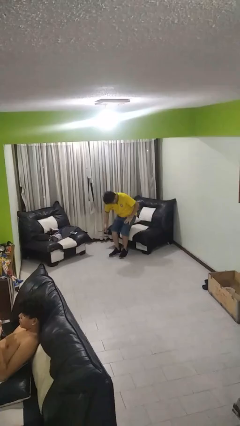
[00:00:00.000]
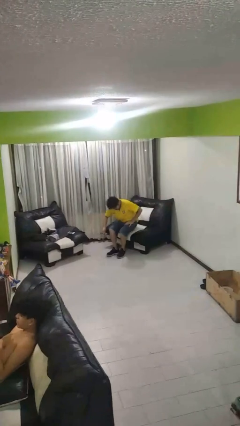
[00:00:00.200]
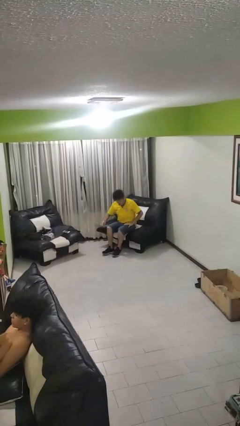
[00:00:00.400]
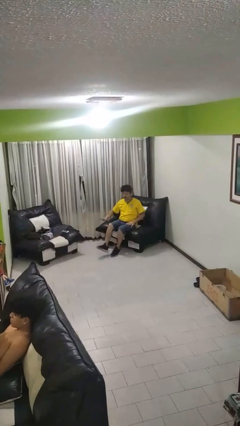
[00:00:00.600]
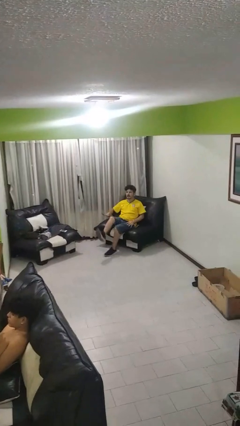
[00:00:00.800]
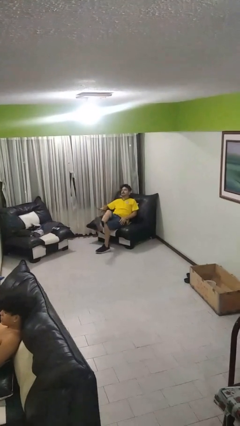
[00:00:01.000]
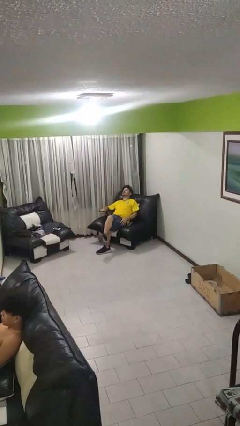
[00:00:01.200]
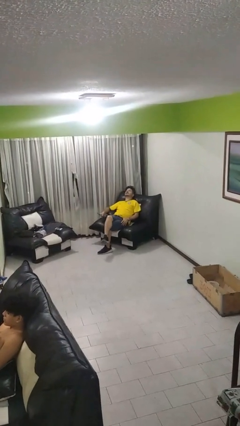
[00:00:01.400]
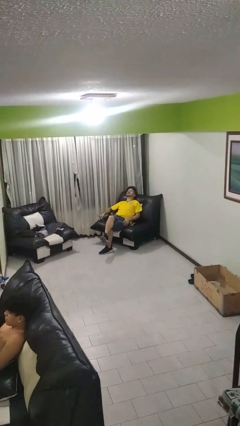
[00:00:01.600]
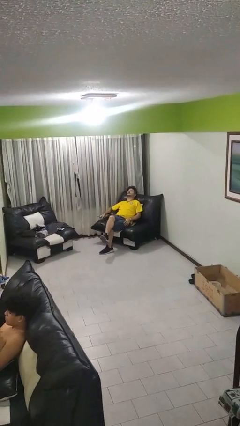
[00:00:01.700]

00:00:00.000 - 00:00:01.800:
person lies down on couch

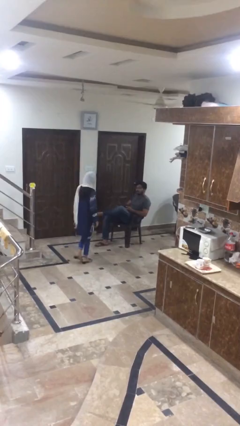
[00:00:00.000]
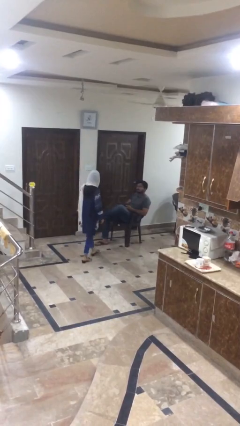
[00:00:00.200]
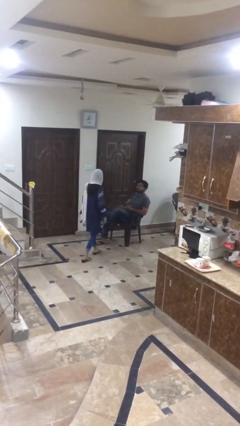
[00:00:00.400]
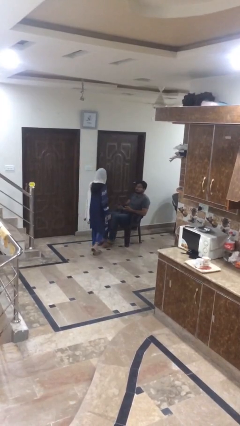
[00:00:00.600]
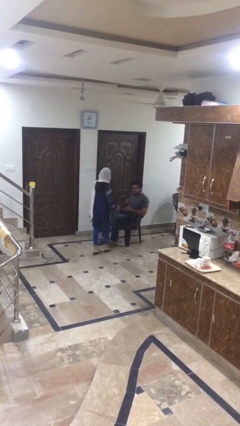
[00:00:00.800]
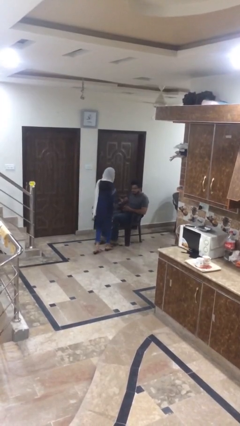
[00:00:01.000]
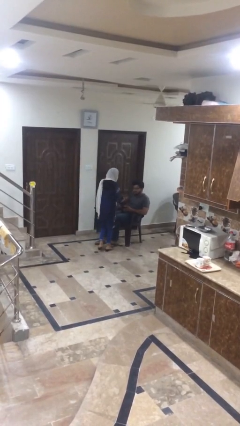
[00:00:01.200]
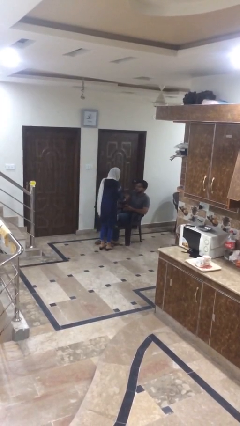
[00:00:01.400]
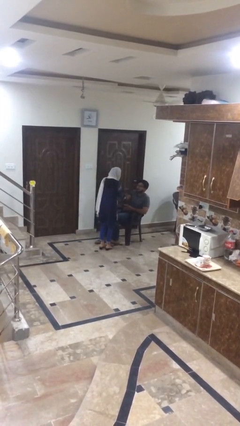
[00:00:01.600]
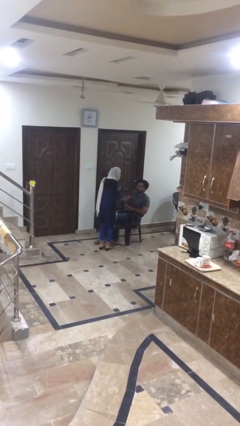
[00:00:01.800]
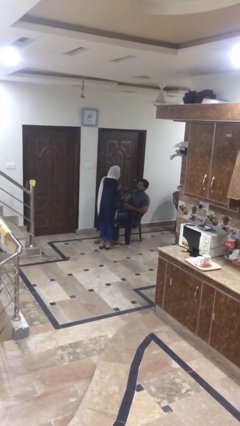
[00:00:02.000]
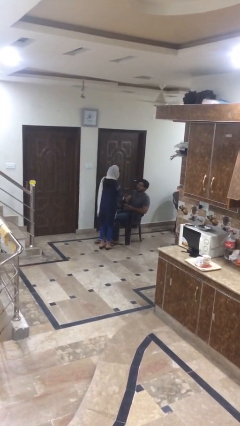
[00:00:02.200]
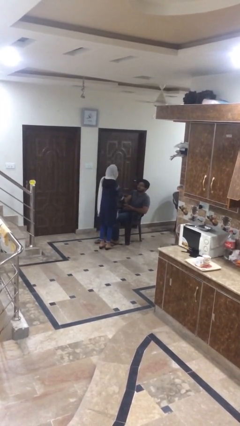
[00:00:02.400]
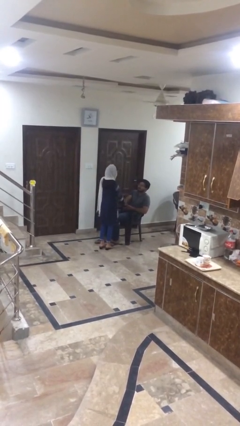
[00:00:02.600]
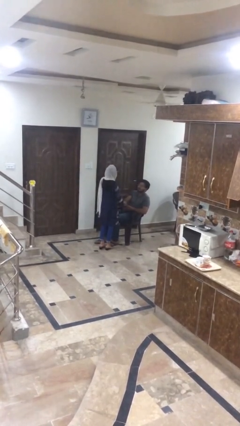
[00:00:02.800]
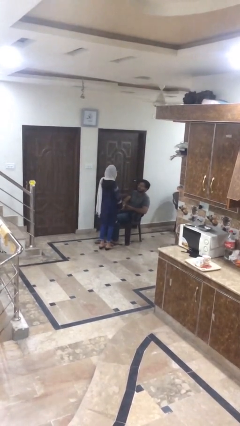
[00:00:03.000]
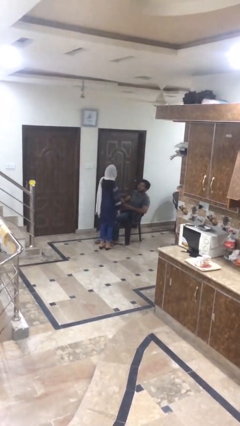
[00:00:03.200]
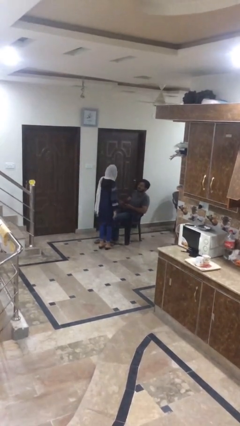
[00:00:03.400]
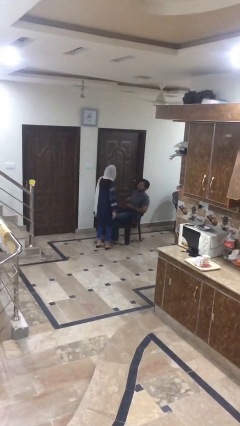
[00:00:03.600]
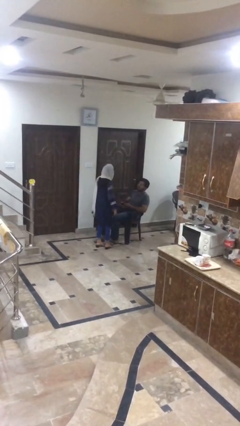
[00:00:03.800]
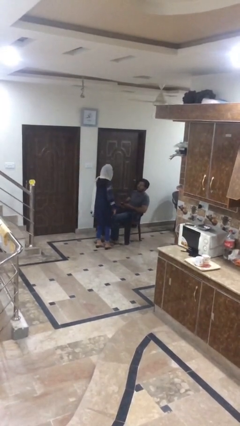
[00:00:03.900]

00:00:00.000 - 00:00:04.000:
person shakes hand

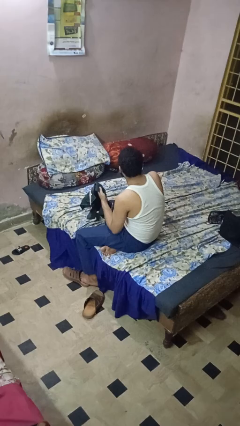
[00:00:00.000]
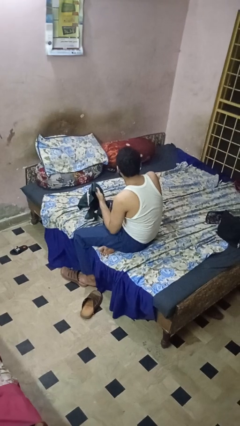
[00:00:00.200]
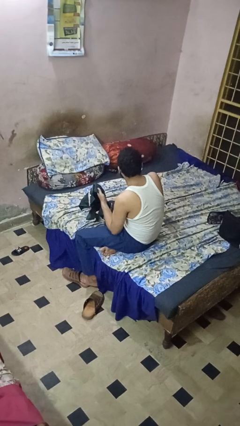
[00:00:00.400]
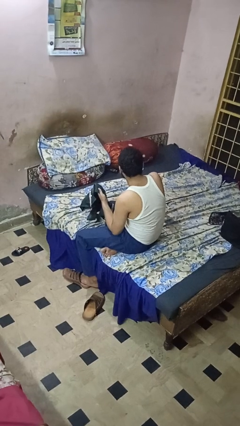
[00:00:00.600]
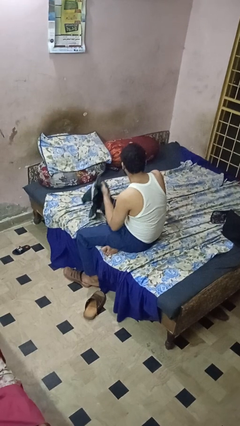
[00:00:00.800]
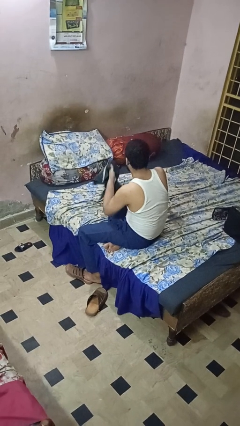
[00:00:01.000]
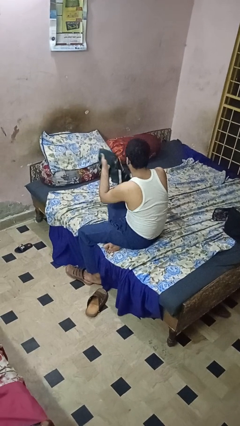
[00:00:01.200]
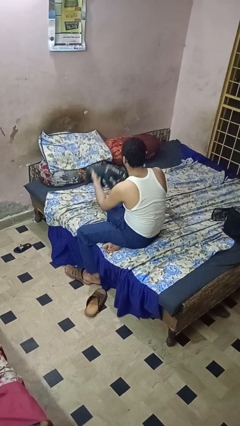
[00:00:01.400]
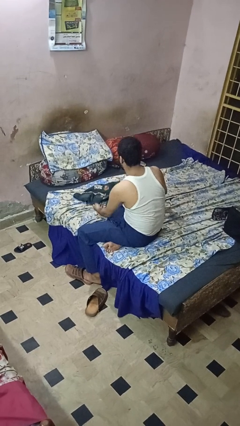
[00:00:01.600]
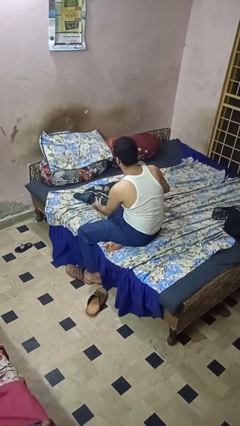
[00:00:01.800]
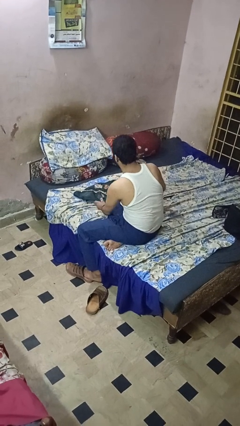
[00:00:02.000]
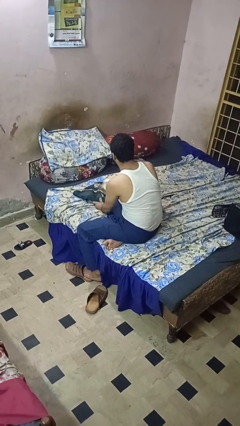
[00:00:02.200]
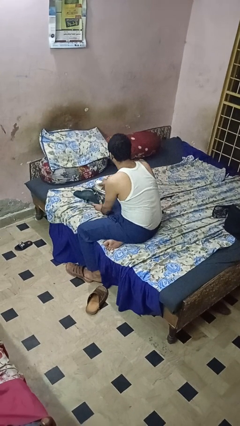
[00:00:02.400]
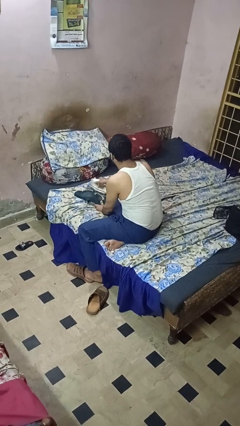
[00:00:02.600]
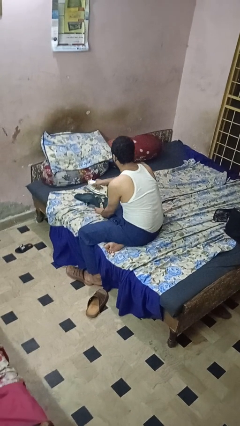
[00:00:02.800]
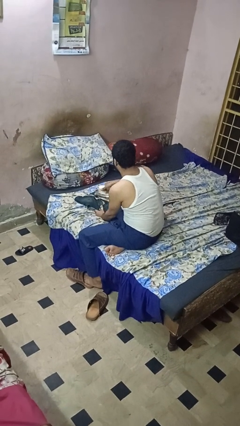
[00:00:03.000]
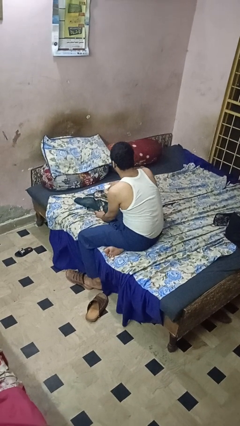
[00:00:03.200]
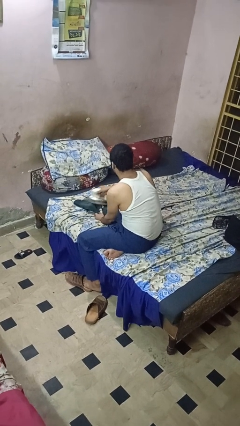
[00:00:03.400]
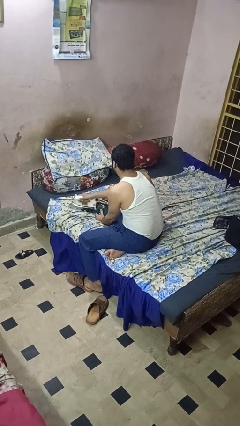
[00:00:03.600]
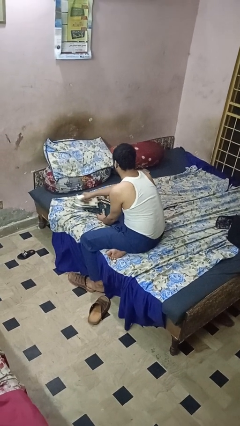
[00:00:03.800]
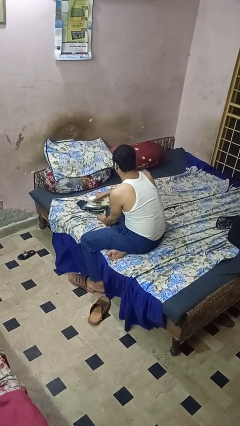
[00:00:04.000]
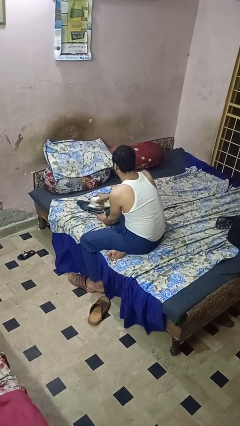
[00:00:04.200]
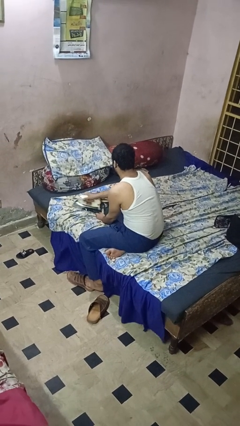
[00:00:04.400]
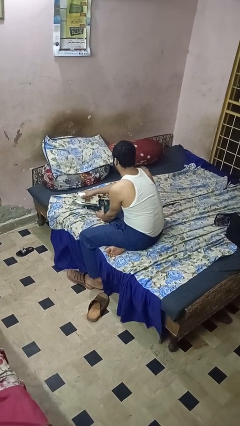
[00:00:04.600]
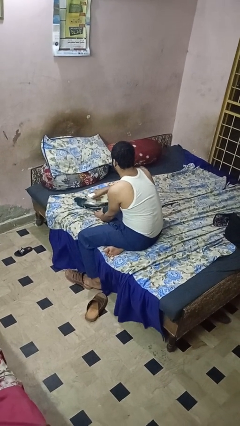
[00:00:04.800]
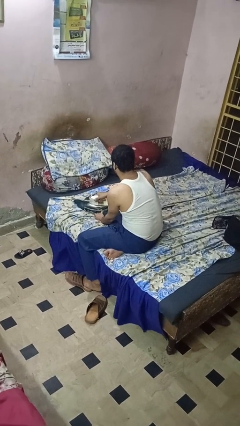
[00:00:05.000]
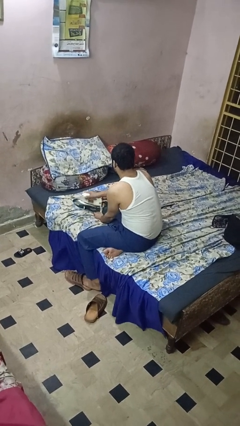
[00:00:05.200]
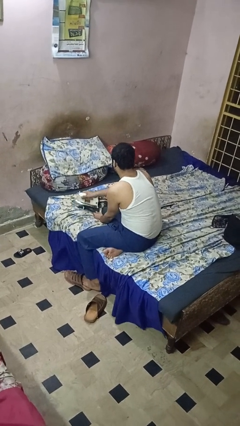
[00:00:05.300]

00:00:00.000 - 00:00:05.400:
person irons clothes

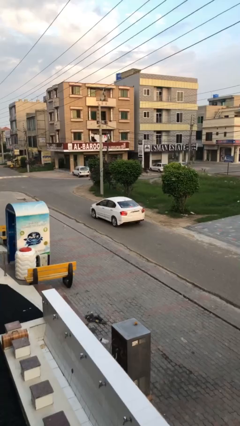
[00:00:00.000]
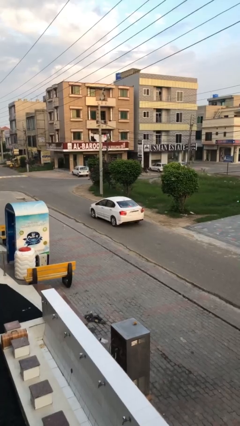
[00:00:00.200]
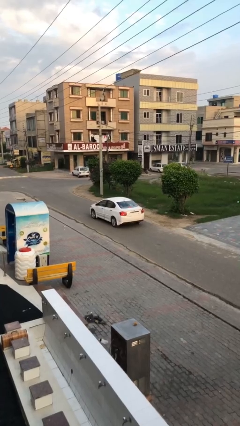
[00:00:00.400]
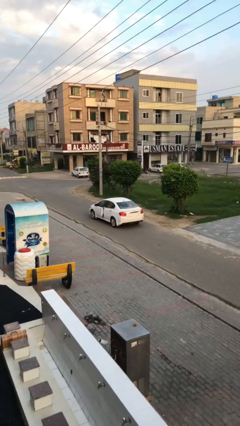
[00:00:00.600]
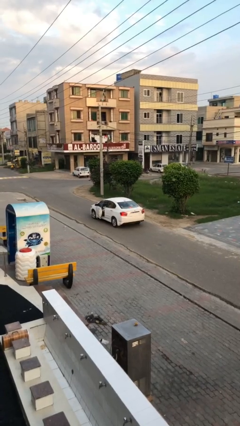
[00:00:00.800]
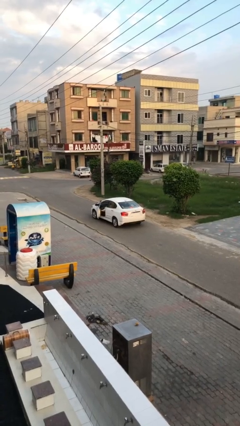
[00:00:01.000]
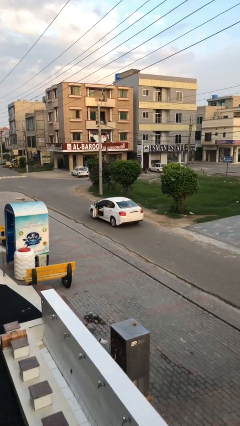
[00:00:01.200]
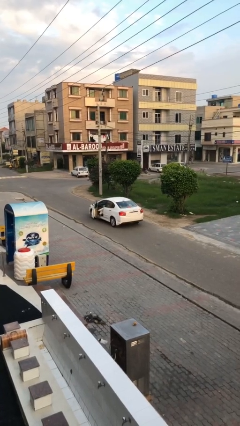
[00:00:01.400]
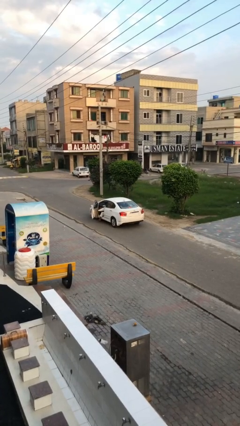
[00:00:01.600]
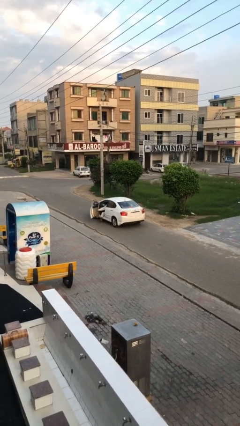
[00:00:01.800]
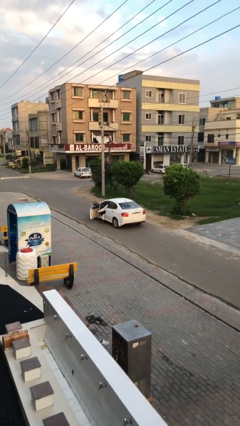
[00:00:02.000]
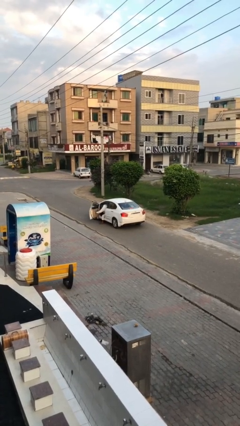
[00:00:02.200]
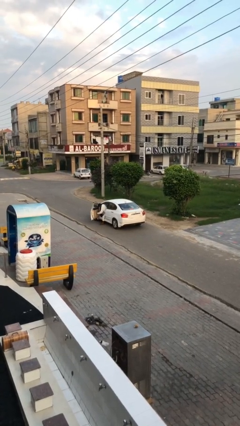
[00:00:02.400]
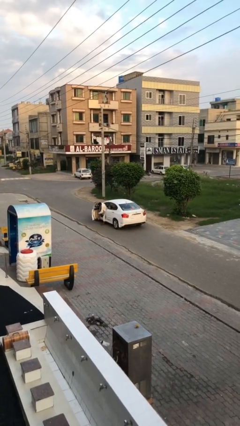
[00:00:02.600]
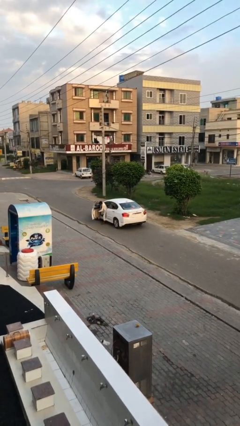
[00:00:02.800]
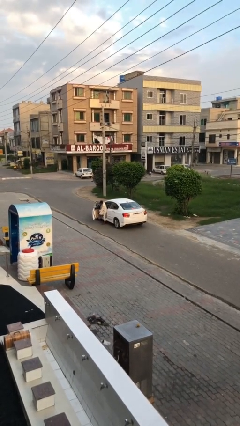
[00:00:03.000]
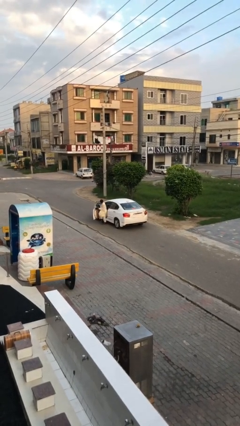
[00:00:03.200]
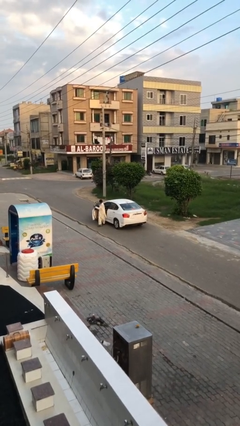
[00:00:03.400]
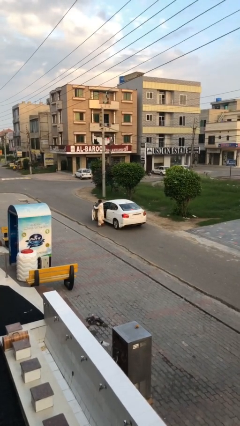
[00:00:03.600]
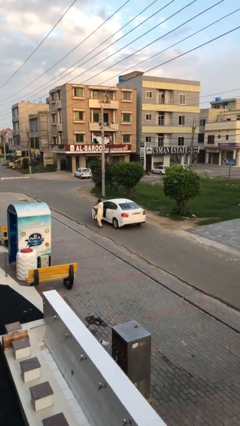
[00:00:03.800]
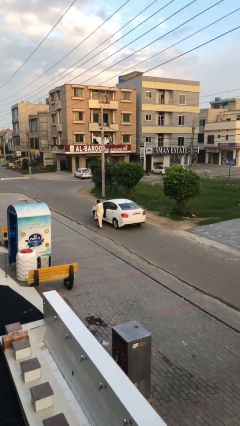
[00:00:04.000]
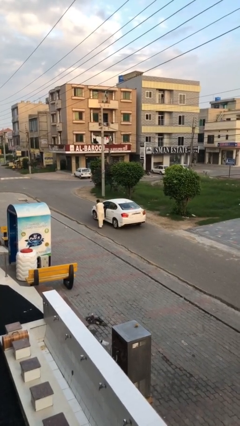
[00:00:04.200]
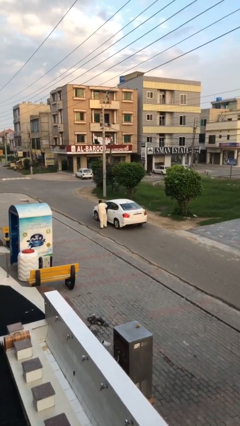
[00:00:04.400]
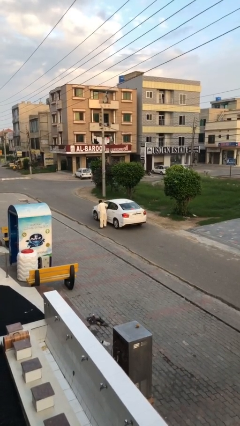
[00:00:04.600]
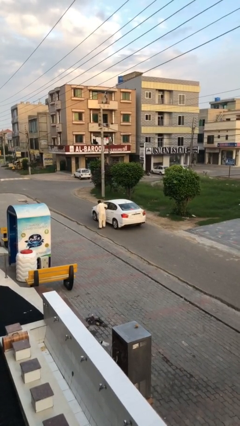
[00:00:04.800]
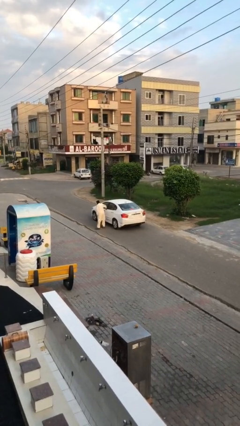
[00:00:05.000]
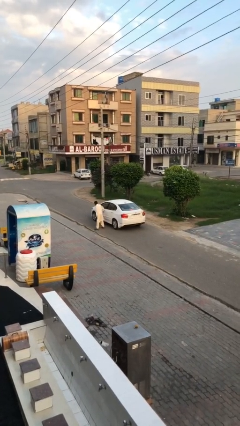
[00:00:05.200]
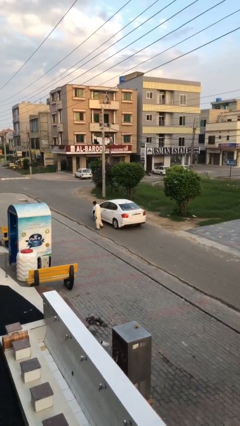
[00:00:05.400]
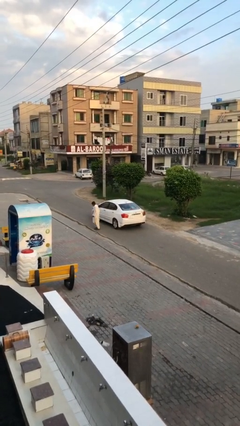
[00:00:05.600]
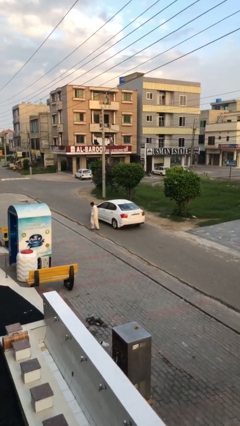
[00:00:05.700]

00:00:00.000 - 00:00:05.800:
car drops off person
